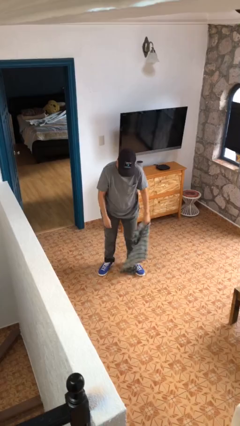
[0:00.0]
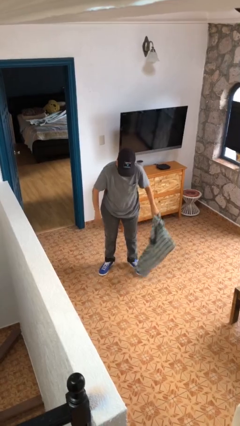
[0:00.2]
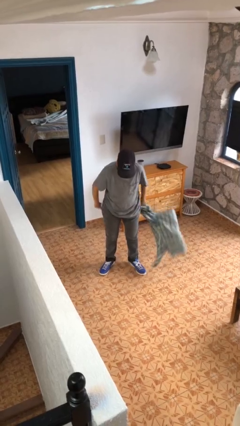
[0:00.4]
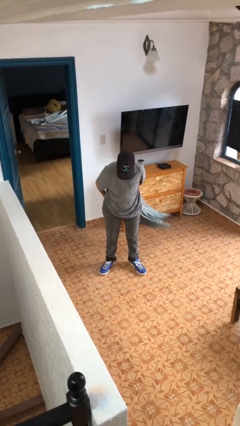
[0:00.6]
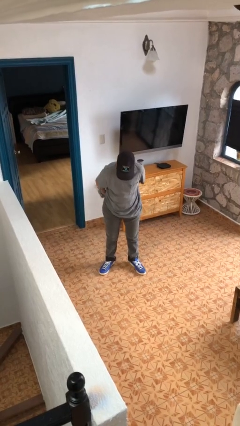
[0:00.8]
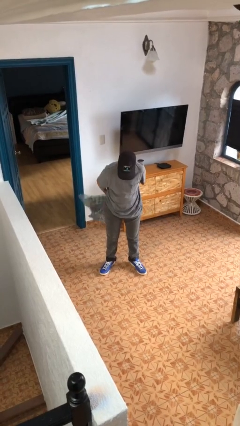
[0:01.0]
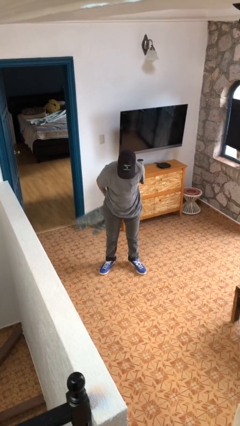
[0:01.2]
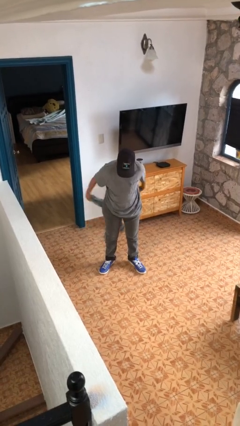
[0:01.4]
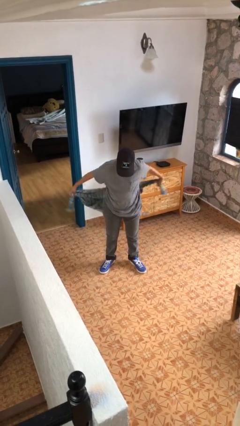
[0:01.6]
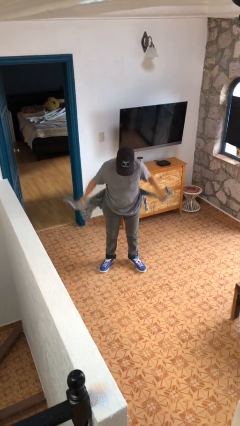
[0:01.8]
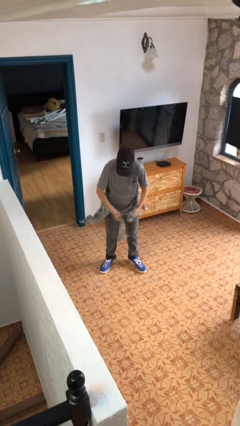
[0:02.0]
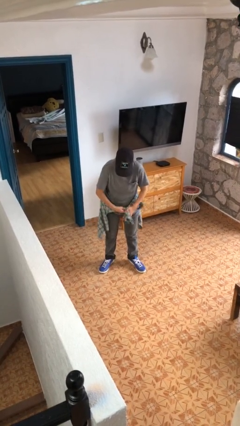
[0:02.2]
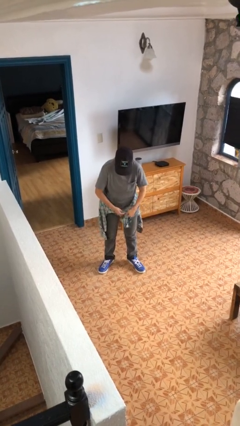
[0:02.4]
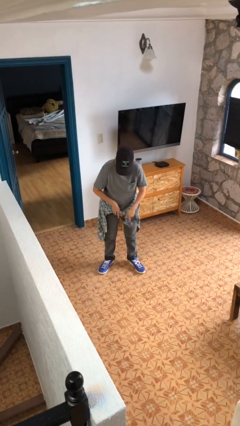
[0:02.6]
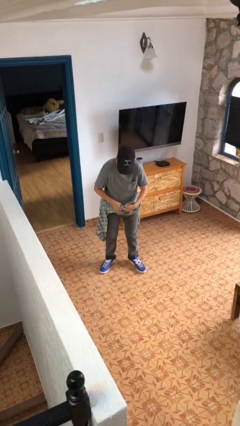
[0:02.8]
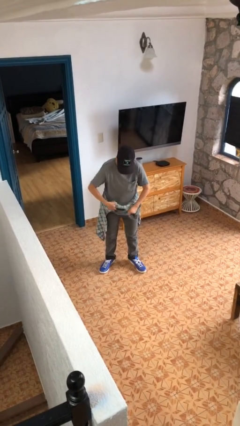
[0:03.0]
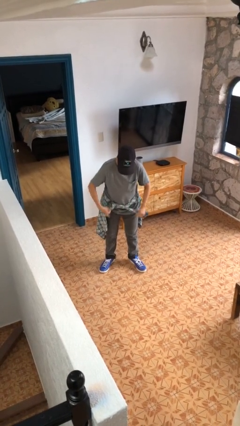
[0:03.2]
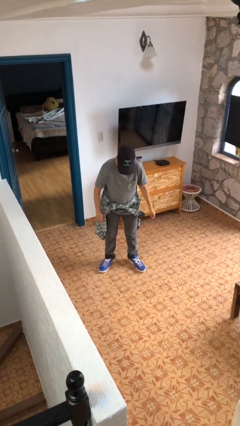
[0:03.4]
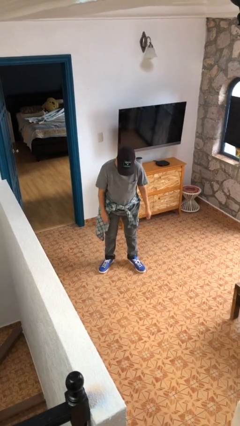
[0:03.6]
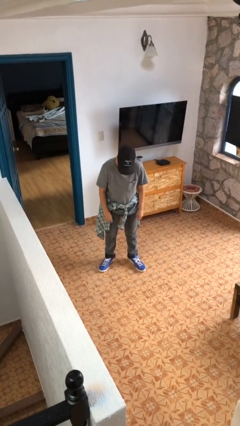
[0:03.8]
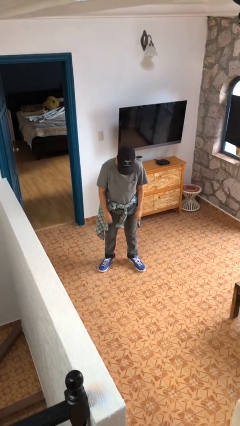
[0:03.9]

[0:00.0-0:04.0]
person ties jacket around waist

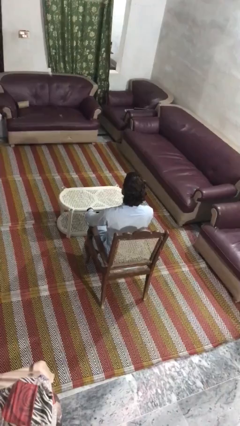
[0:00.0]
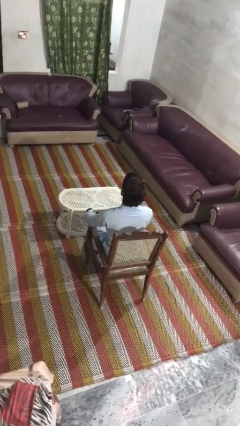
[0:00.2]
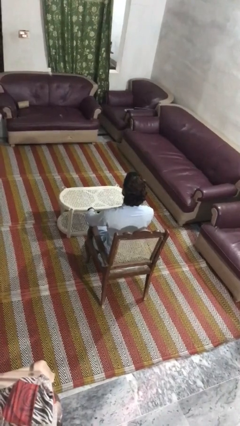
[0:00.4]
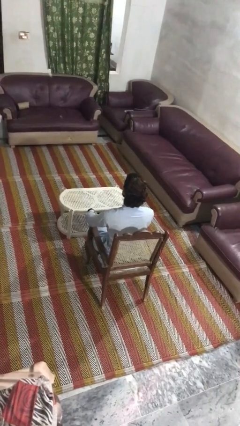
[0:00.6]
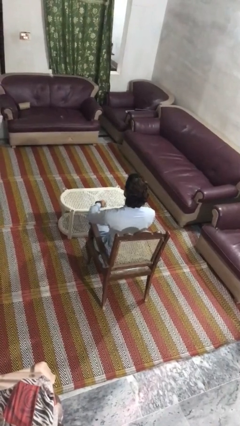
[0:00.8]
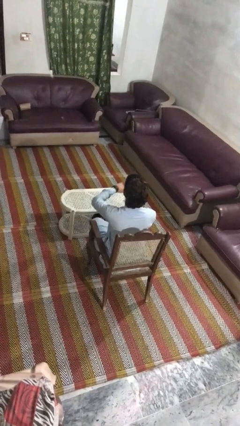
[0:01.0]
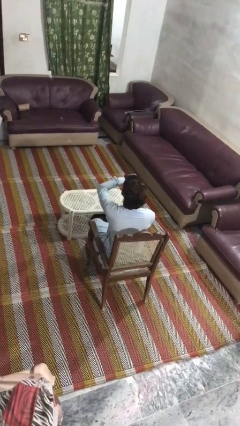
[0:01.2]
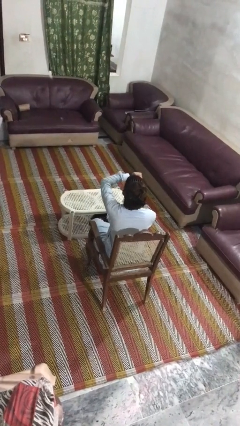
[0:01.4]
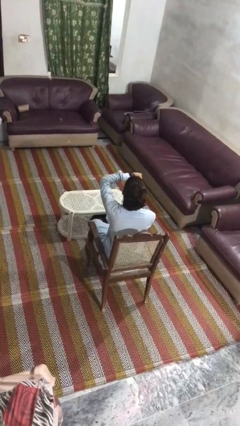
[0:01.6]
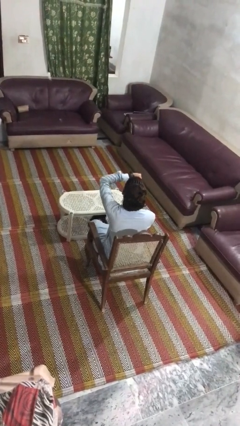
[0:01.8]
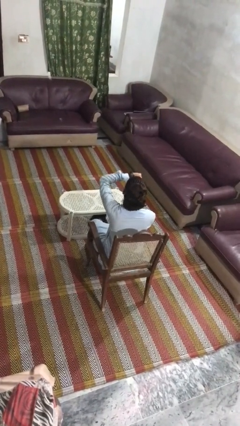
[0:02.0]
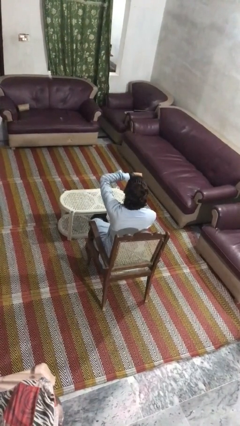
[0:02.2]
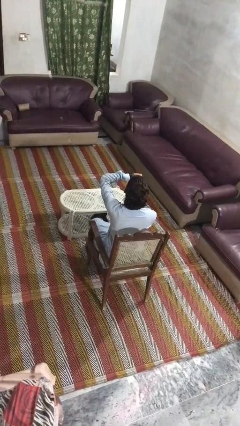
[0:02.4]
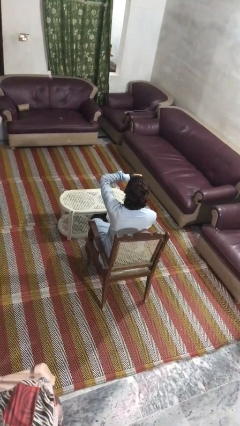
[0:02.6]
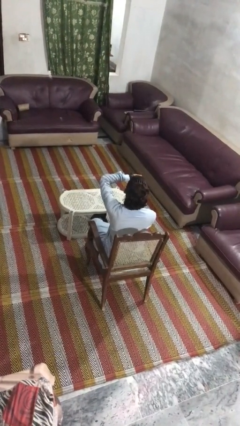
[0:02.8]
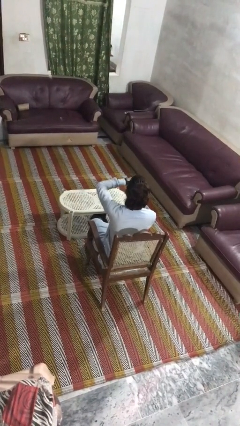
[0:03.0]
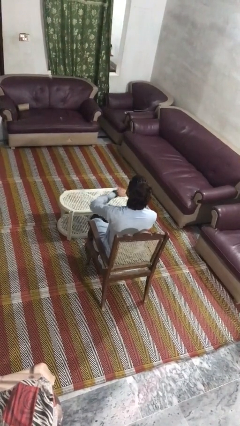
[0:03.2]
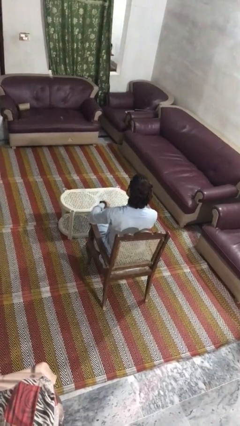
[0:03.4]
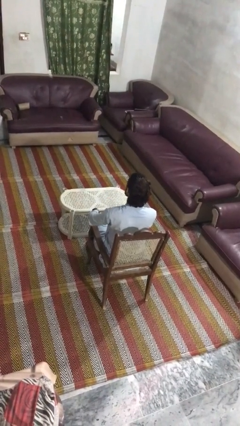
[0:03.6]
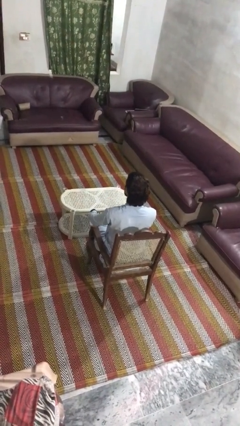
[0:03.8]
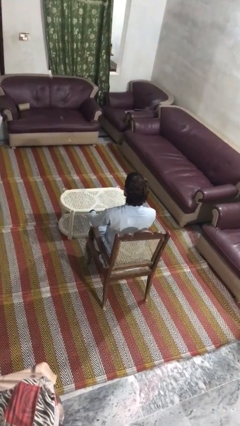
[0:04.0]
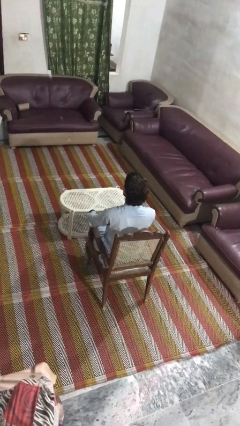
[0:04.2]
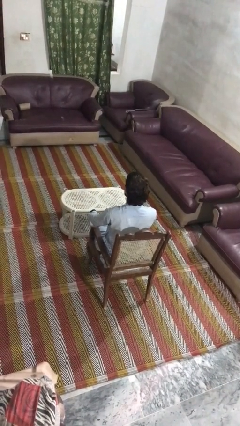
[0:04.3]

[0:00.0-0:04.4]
person looks at wristwatch

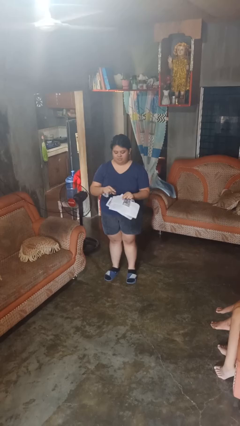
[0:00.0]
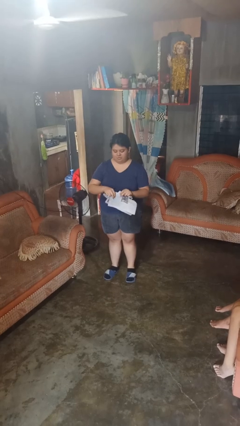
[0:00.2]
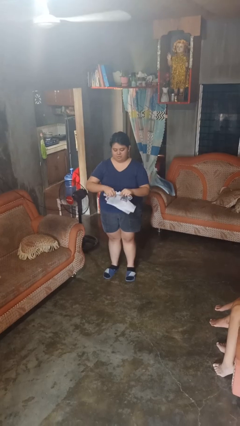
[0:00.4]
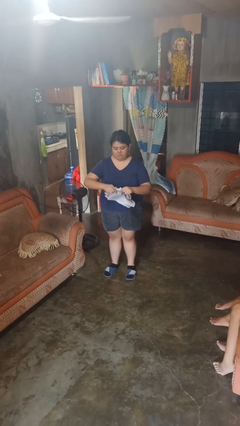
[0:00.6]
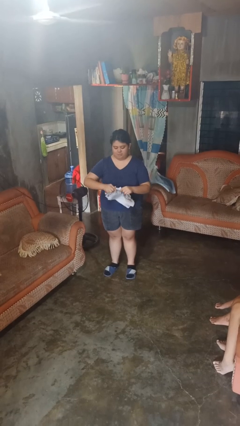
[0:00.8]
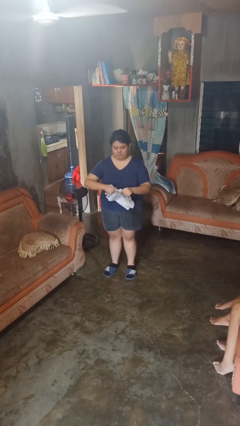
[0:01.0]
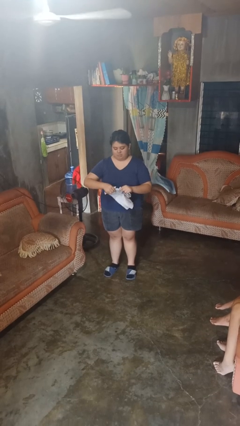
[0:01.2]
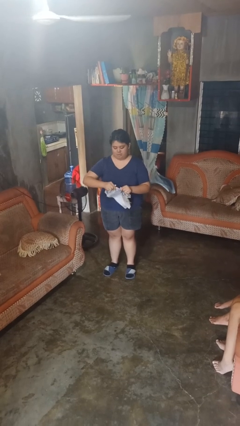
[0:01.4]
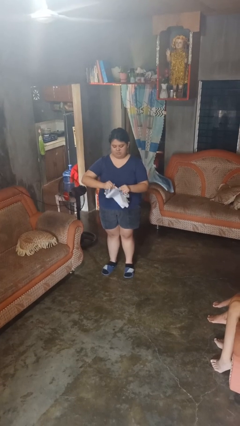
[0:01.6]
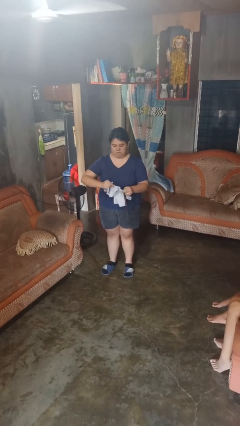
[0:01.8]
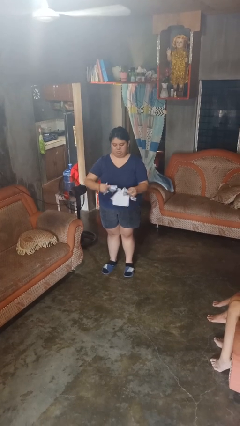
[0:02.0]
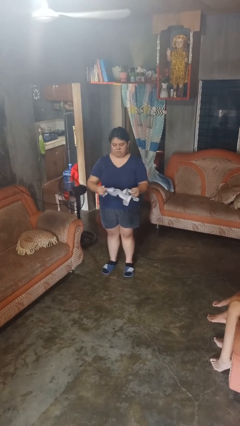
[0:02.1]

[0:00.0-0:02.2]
person tears paper

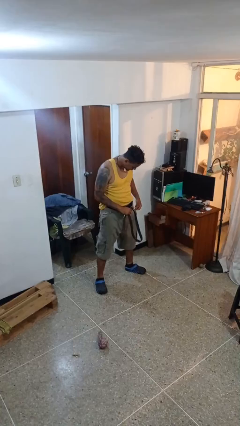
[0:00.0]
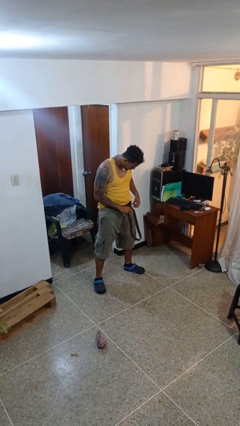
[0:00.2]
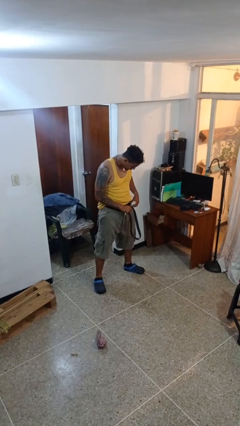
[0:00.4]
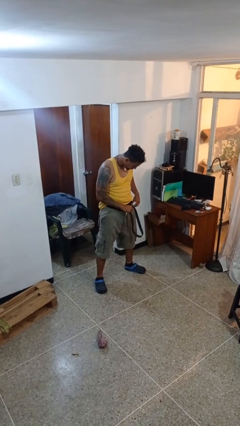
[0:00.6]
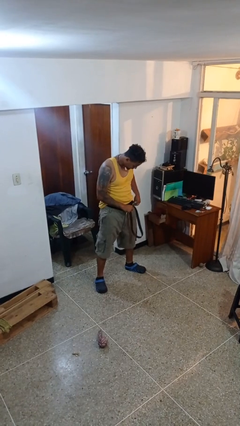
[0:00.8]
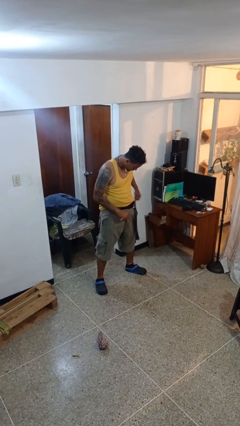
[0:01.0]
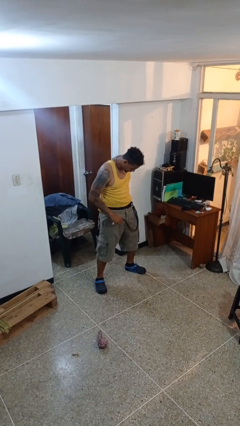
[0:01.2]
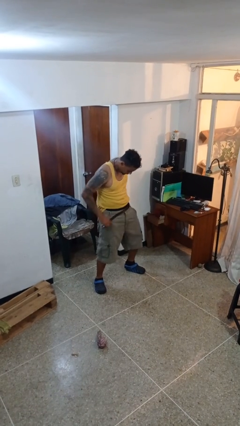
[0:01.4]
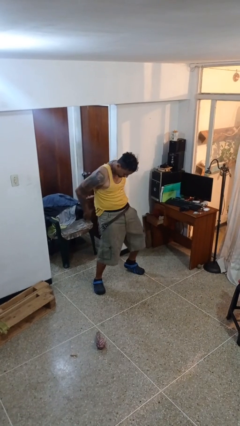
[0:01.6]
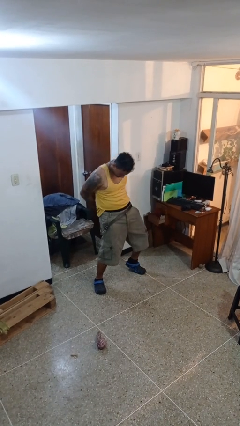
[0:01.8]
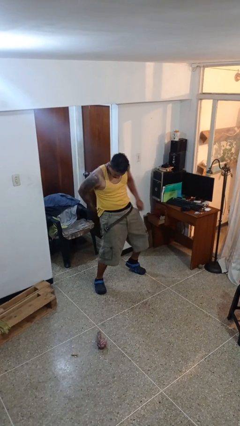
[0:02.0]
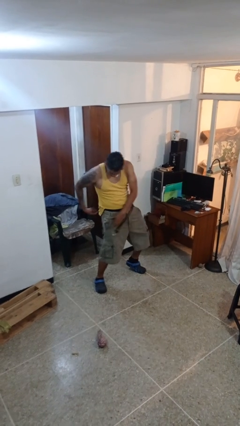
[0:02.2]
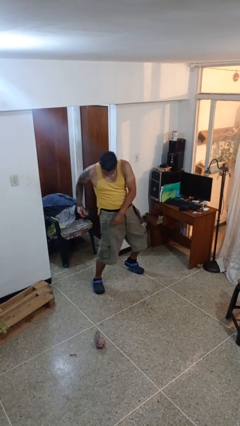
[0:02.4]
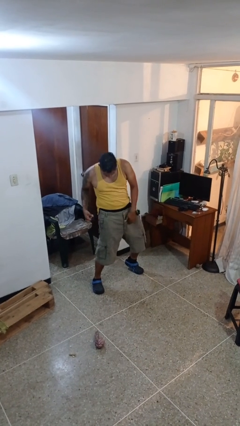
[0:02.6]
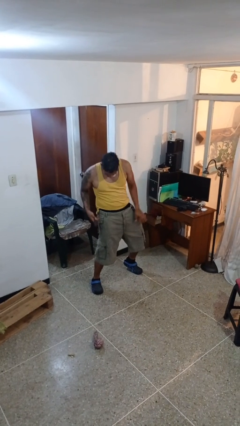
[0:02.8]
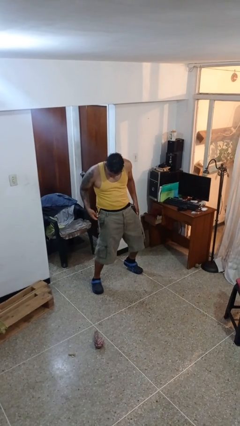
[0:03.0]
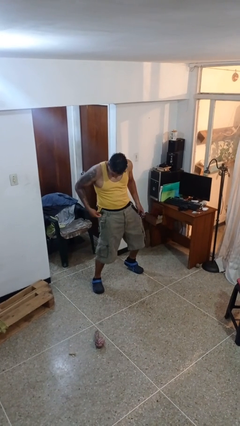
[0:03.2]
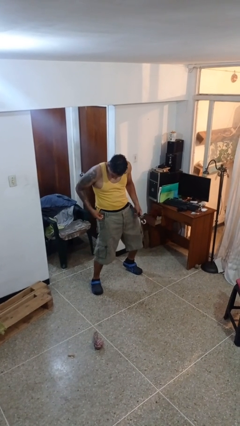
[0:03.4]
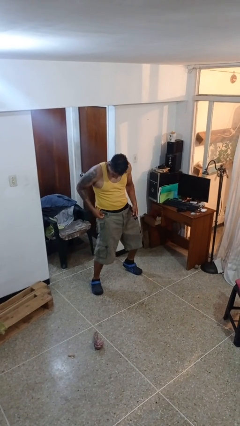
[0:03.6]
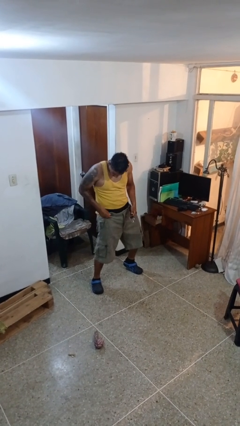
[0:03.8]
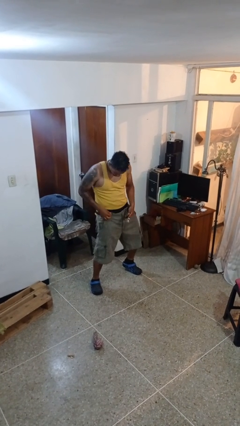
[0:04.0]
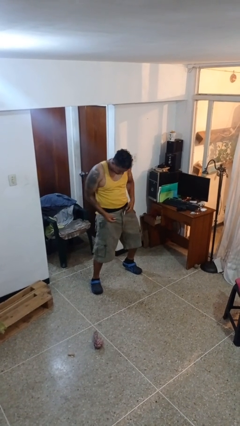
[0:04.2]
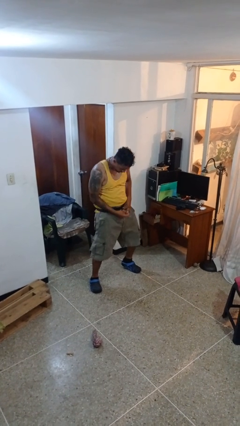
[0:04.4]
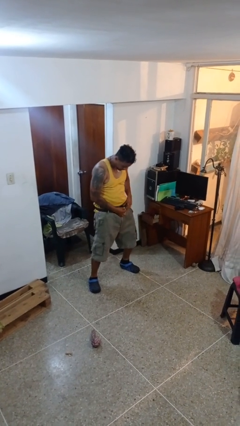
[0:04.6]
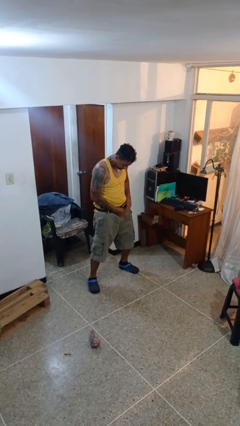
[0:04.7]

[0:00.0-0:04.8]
person puts on belt

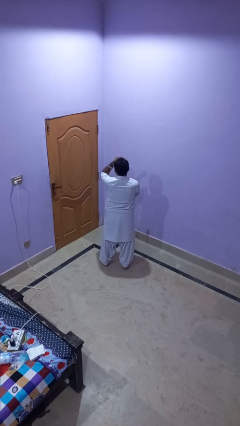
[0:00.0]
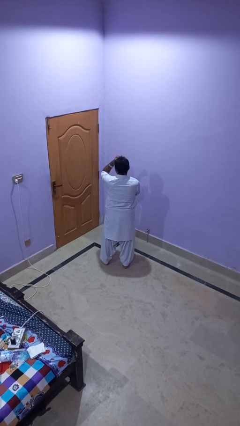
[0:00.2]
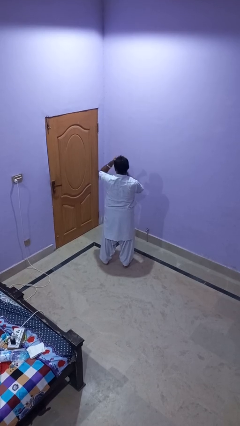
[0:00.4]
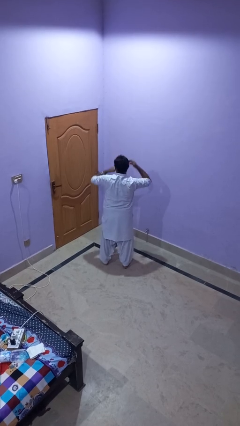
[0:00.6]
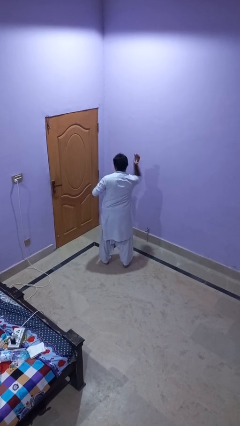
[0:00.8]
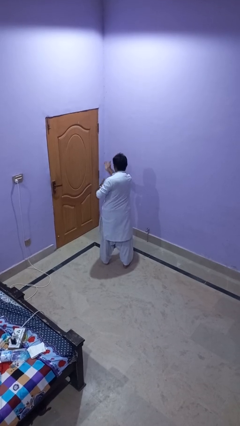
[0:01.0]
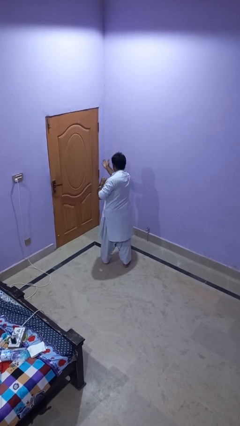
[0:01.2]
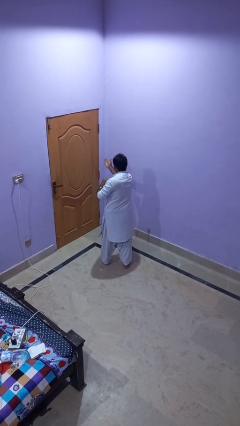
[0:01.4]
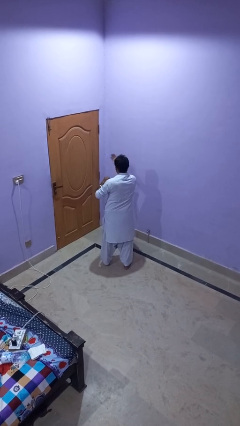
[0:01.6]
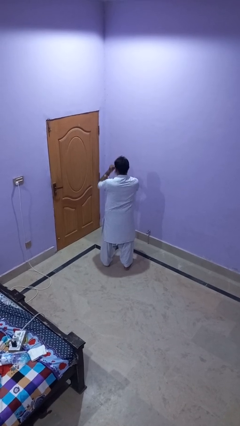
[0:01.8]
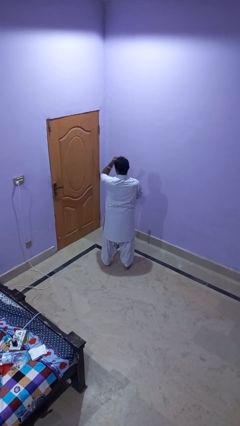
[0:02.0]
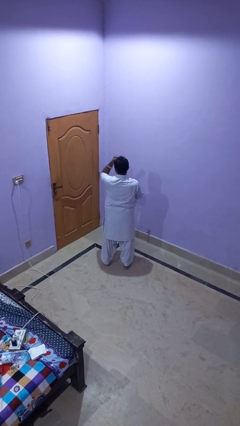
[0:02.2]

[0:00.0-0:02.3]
person karate chop
